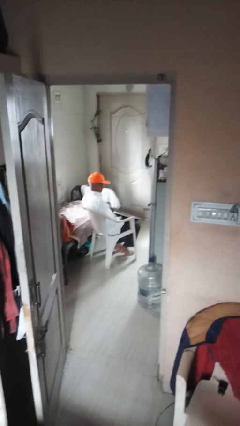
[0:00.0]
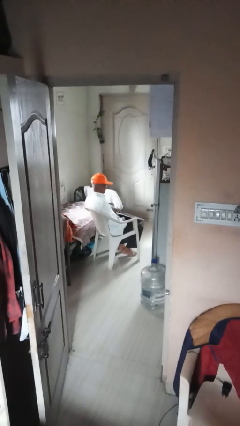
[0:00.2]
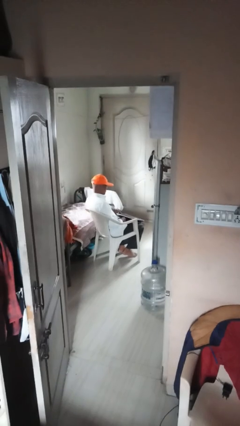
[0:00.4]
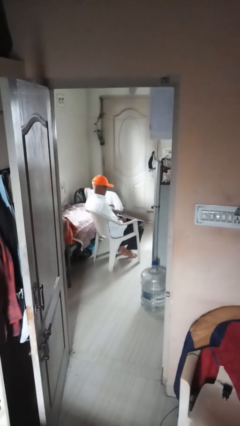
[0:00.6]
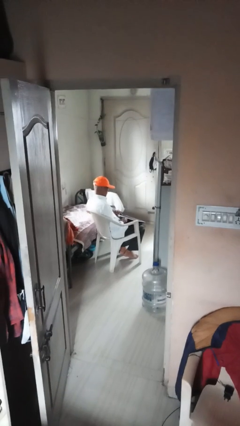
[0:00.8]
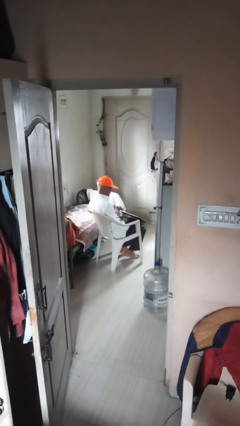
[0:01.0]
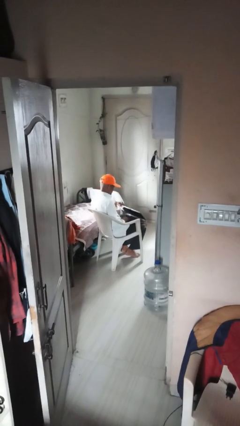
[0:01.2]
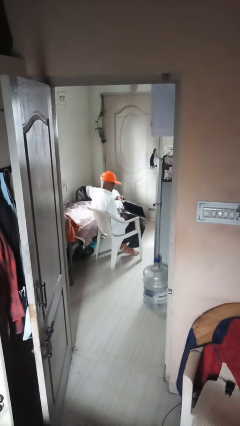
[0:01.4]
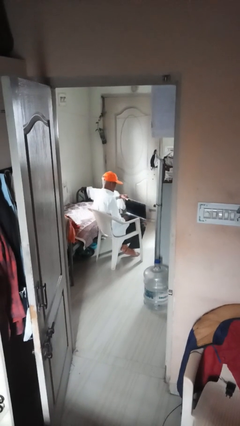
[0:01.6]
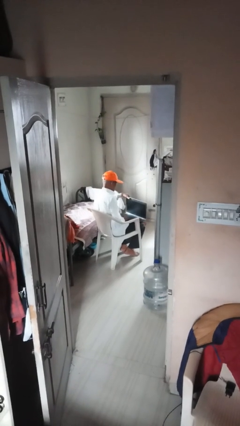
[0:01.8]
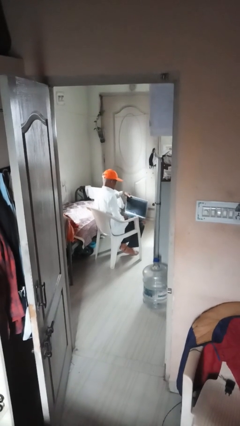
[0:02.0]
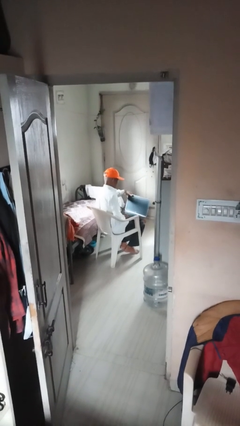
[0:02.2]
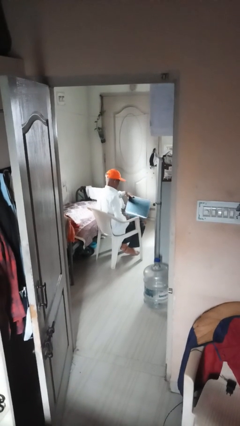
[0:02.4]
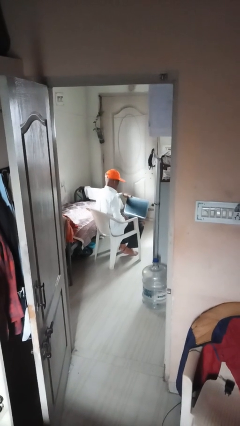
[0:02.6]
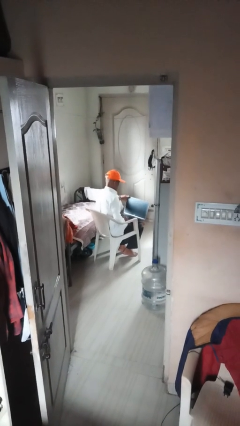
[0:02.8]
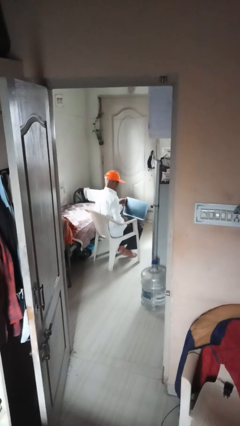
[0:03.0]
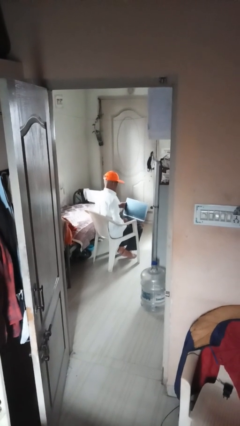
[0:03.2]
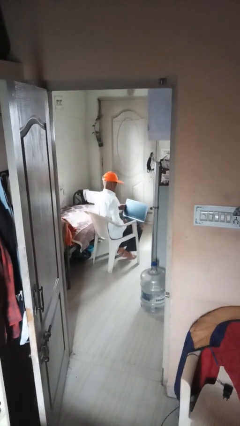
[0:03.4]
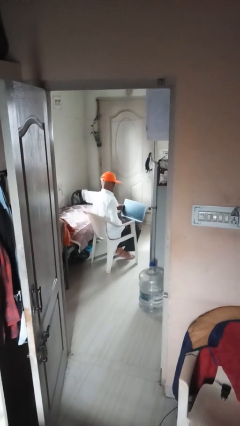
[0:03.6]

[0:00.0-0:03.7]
person opens laptop

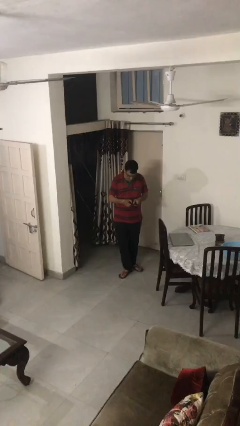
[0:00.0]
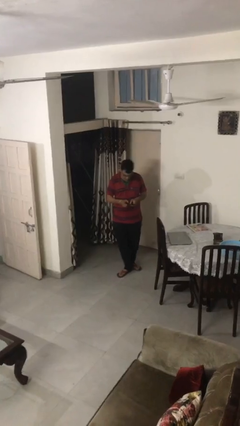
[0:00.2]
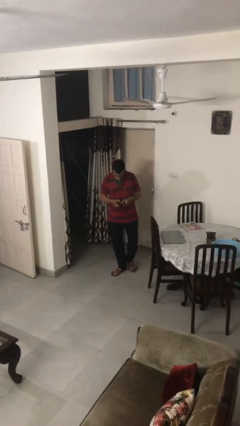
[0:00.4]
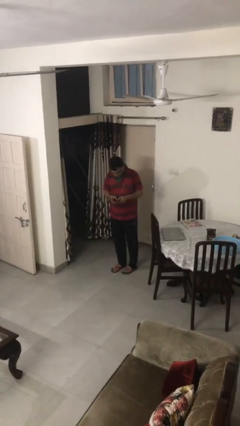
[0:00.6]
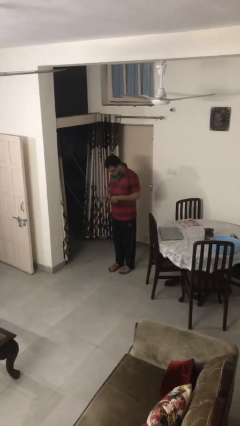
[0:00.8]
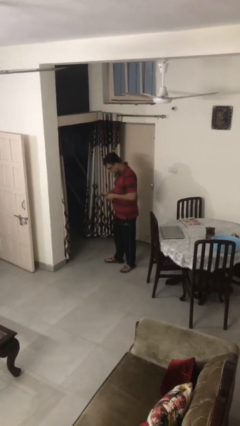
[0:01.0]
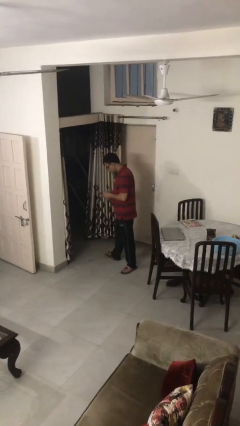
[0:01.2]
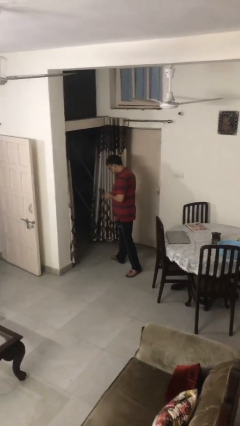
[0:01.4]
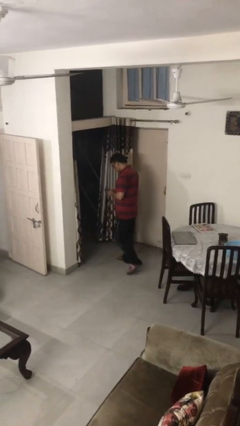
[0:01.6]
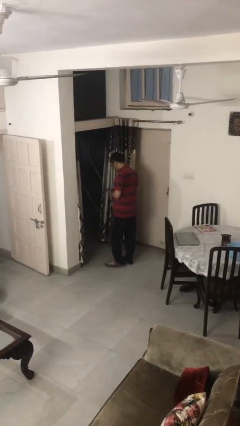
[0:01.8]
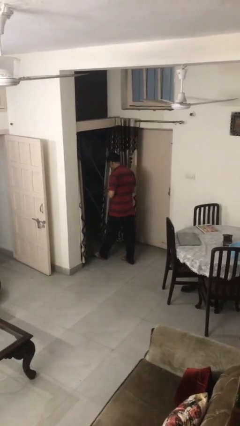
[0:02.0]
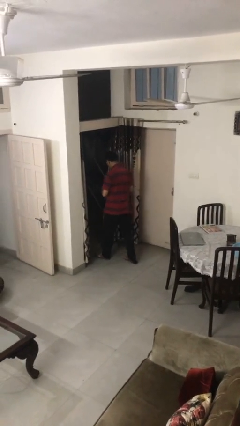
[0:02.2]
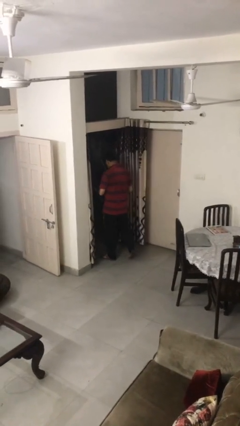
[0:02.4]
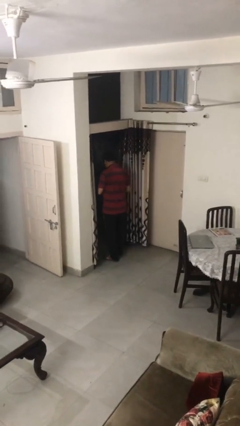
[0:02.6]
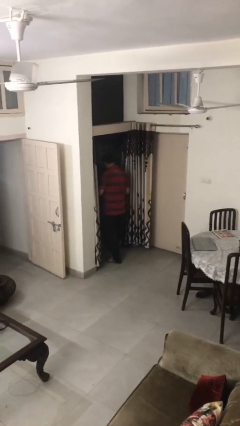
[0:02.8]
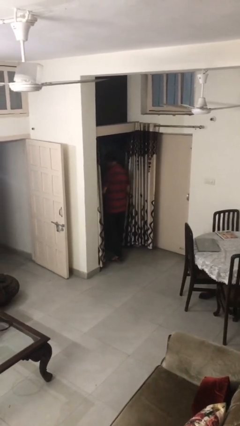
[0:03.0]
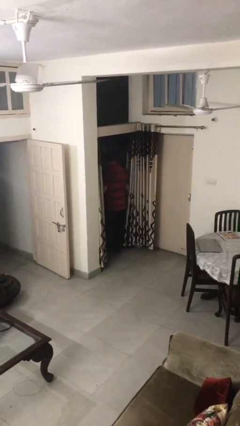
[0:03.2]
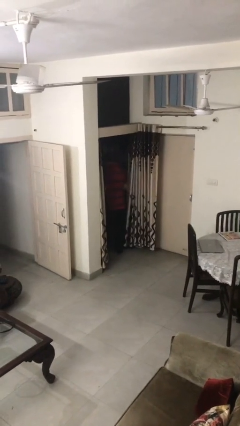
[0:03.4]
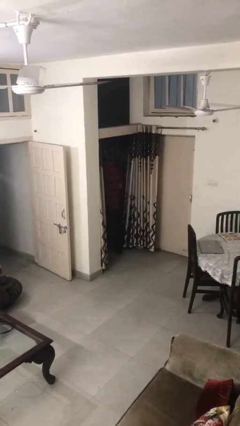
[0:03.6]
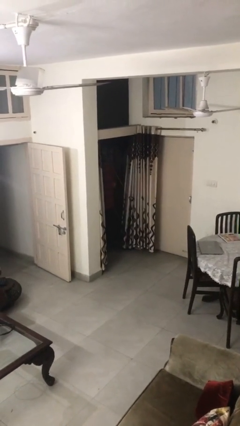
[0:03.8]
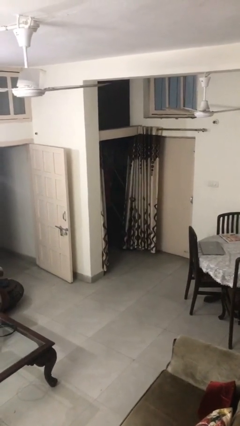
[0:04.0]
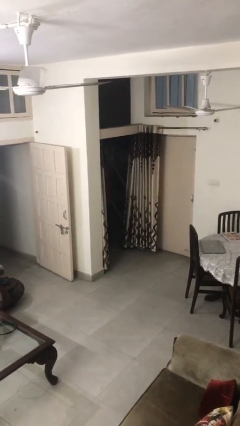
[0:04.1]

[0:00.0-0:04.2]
person exits scene through structure

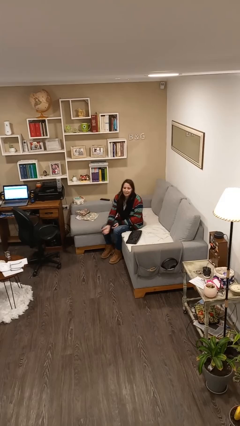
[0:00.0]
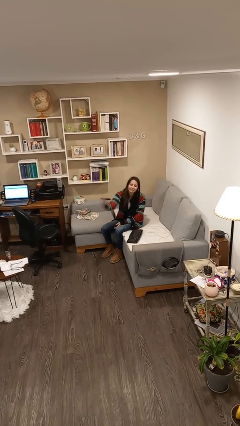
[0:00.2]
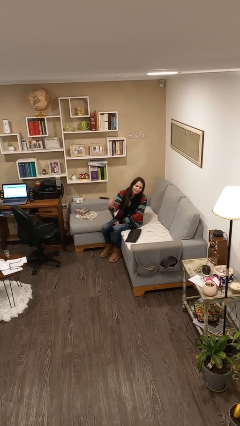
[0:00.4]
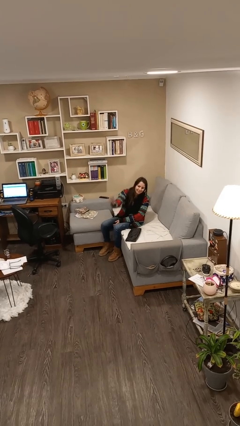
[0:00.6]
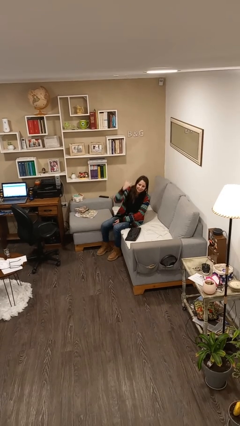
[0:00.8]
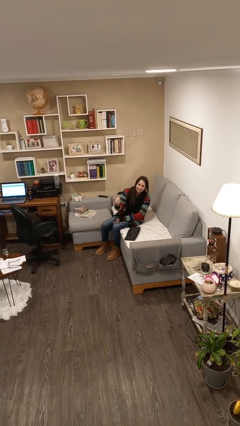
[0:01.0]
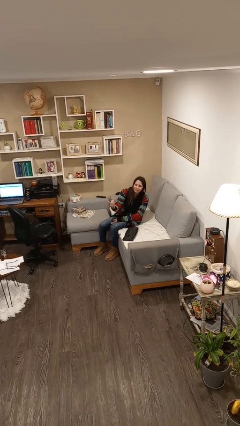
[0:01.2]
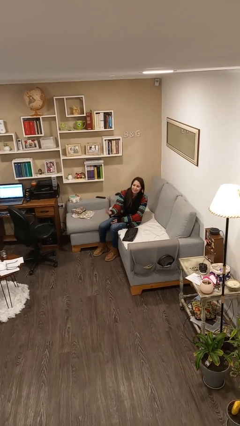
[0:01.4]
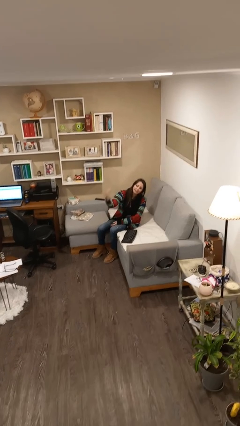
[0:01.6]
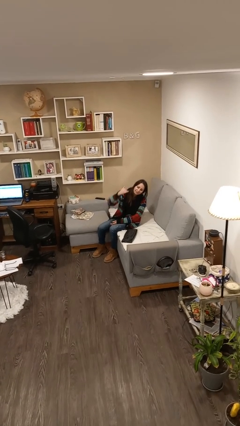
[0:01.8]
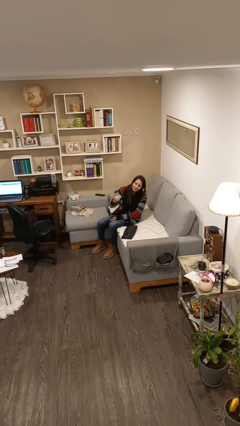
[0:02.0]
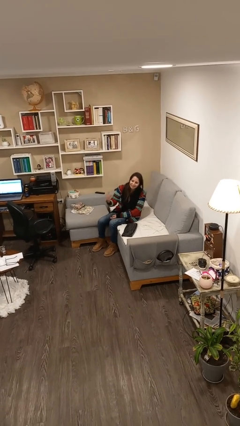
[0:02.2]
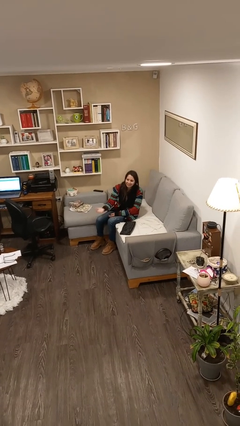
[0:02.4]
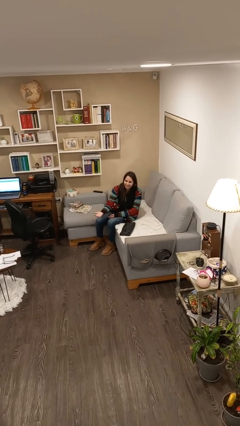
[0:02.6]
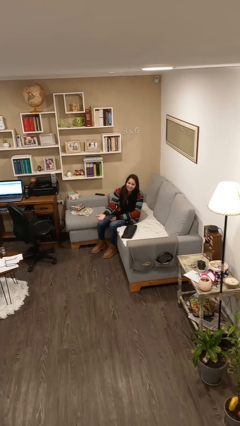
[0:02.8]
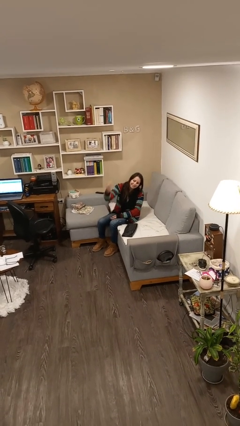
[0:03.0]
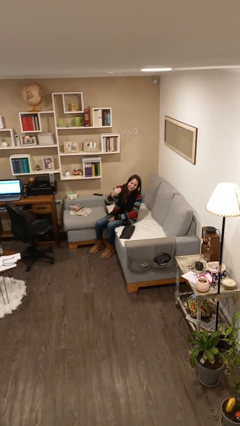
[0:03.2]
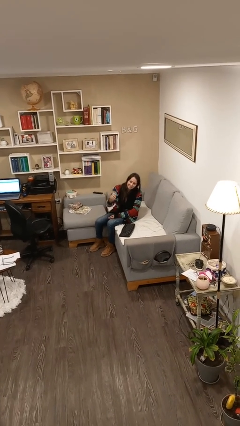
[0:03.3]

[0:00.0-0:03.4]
person gestures come here

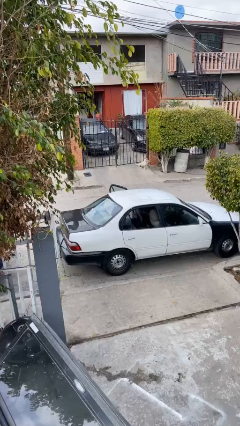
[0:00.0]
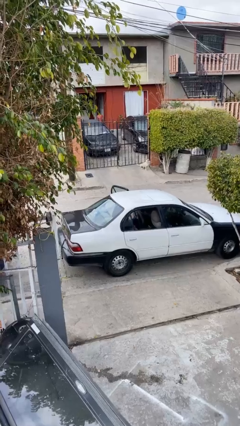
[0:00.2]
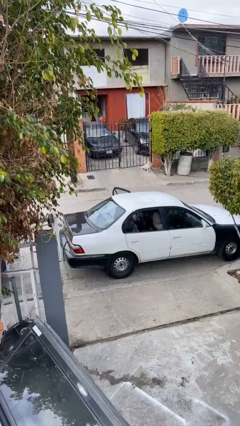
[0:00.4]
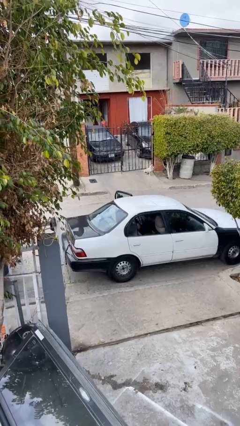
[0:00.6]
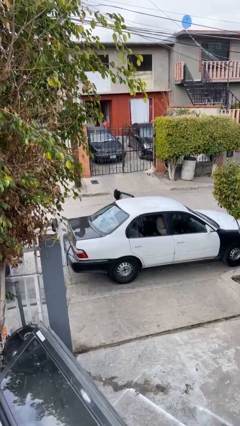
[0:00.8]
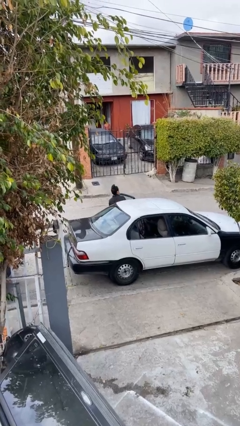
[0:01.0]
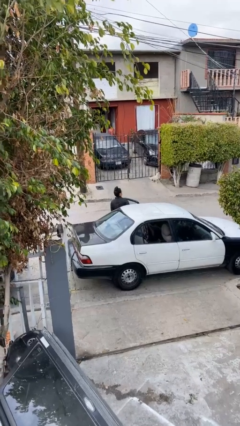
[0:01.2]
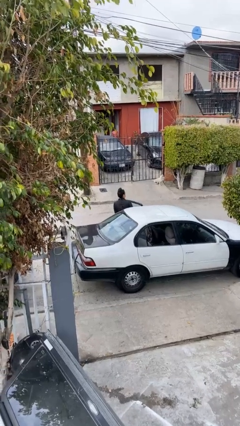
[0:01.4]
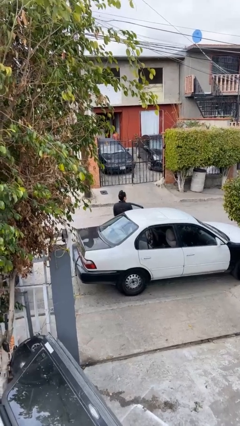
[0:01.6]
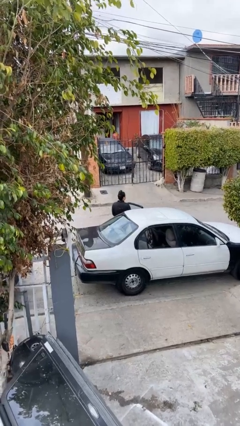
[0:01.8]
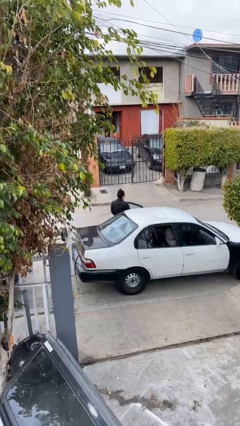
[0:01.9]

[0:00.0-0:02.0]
person exits car

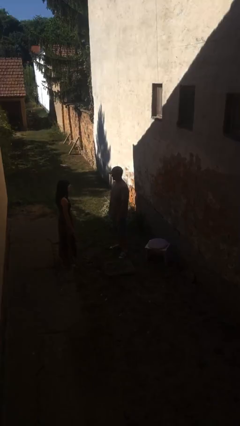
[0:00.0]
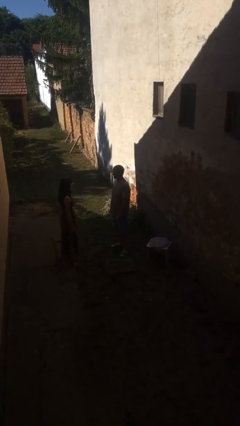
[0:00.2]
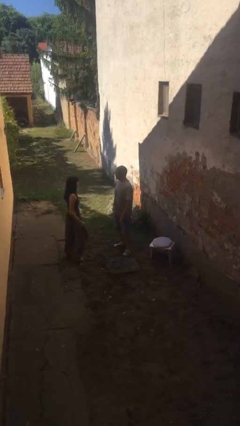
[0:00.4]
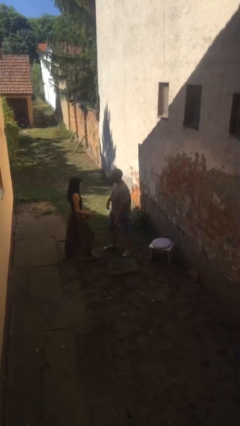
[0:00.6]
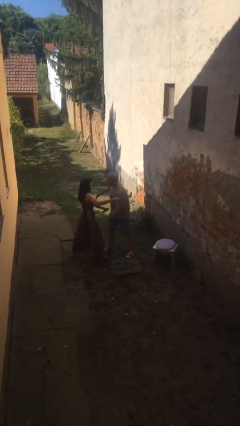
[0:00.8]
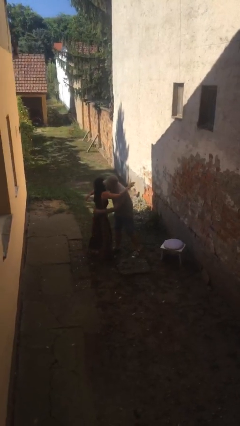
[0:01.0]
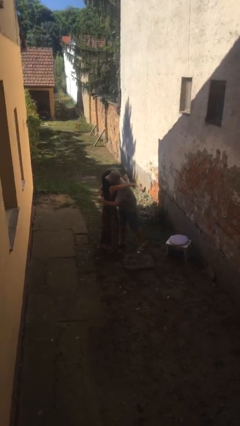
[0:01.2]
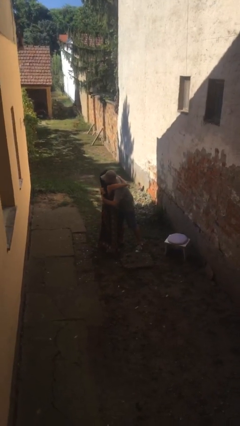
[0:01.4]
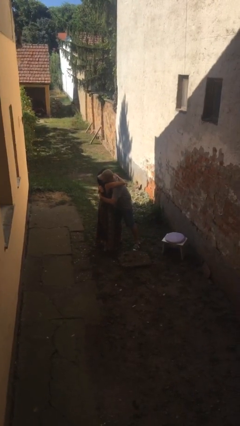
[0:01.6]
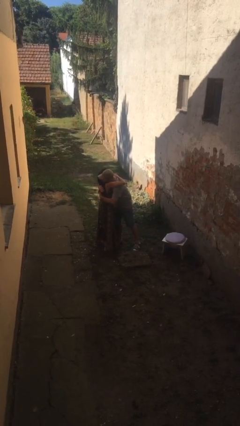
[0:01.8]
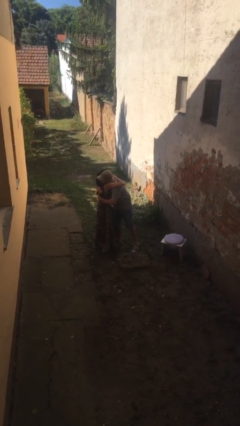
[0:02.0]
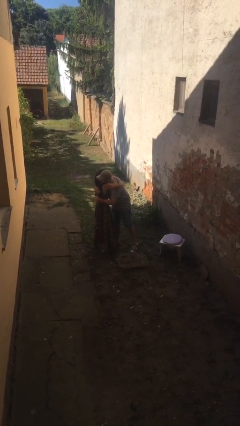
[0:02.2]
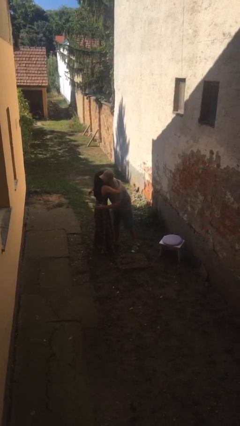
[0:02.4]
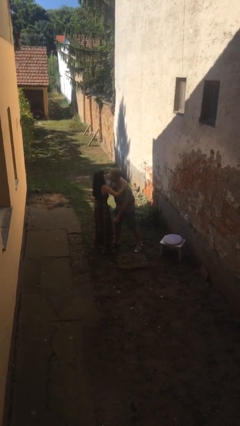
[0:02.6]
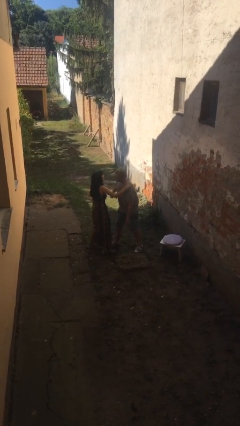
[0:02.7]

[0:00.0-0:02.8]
person embraces person

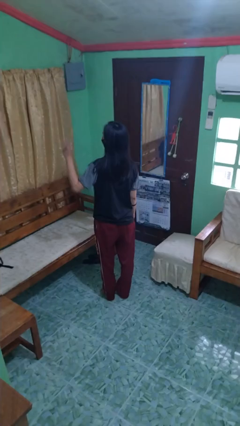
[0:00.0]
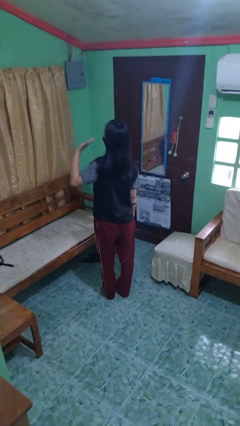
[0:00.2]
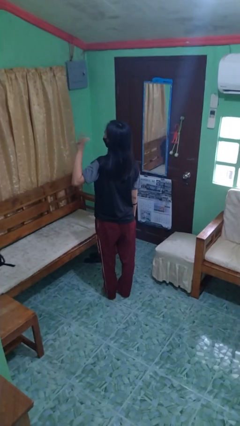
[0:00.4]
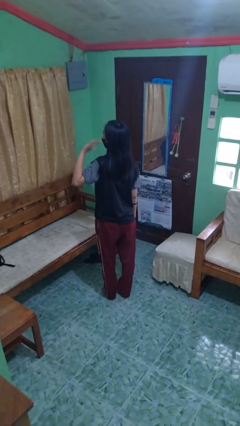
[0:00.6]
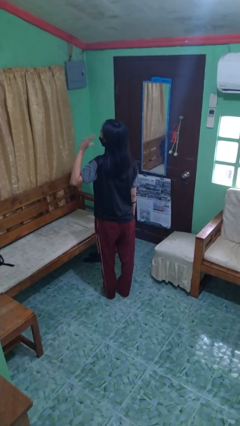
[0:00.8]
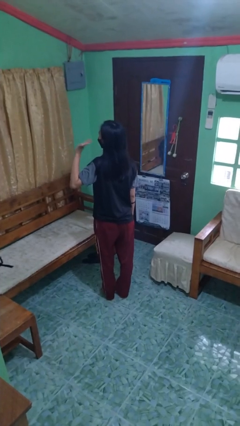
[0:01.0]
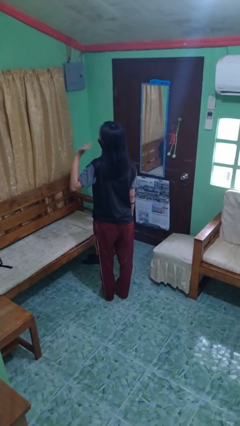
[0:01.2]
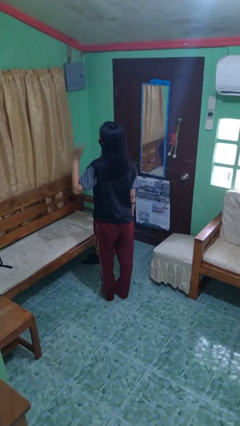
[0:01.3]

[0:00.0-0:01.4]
person waves at person
